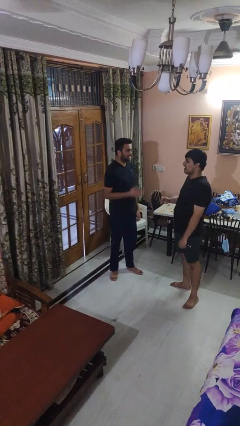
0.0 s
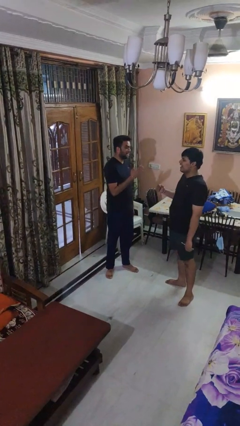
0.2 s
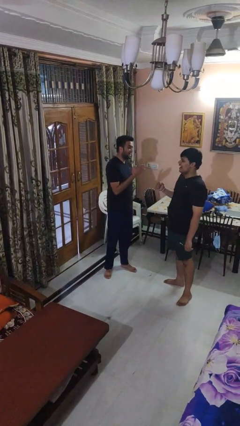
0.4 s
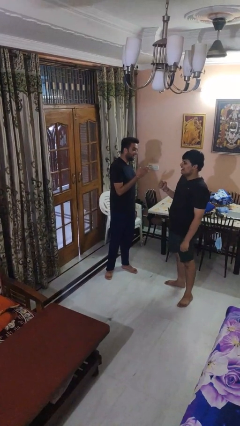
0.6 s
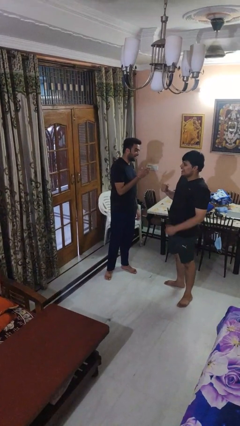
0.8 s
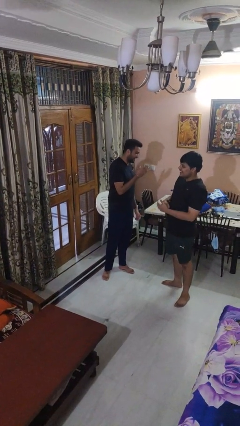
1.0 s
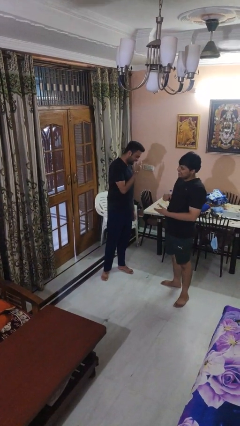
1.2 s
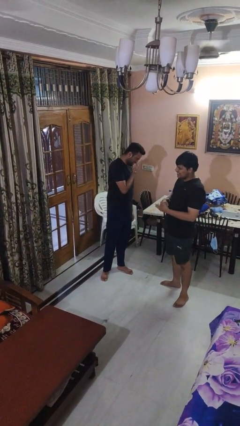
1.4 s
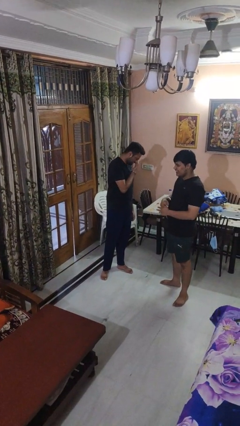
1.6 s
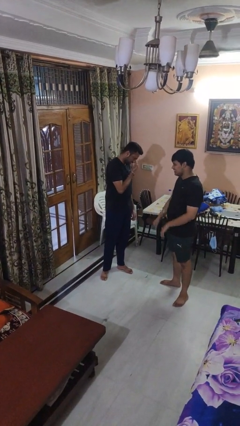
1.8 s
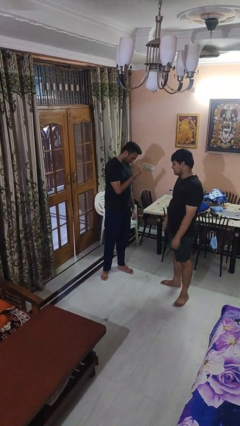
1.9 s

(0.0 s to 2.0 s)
person laughs with person

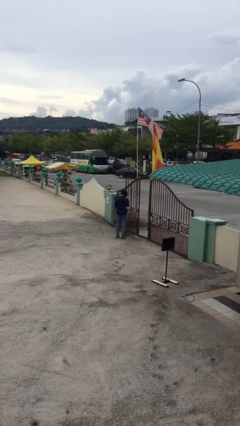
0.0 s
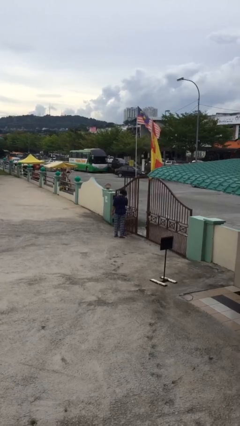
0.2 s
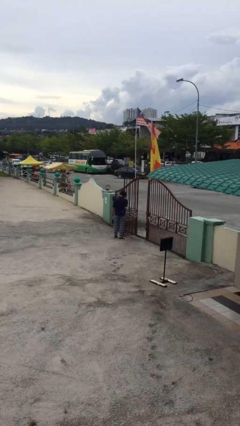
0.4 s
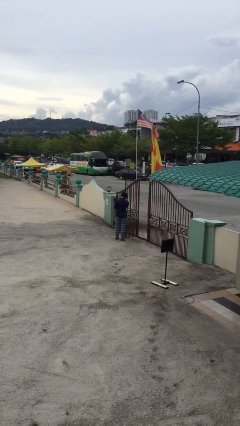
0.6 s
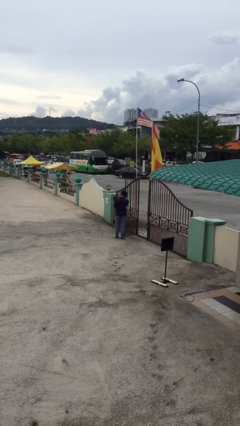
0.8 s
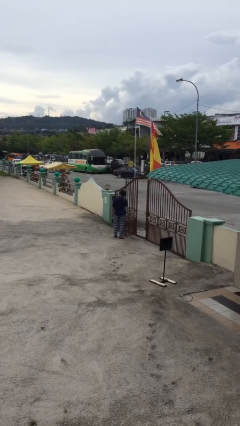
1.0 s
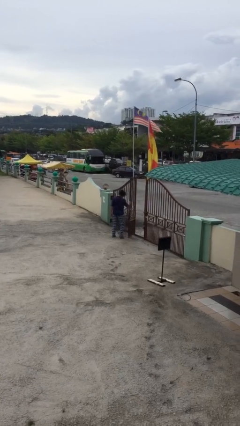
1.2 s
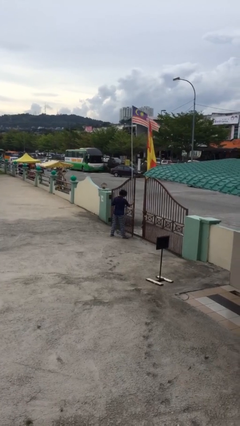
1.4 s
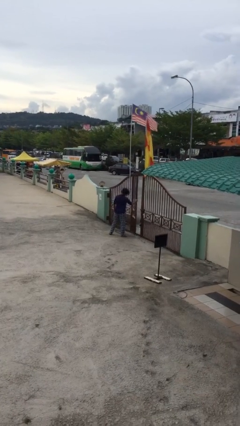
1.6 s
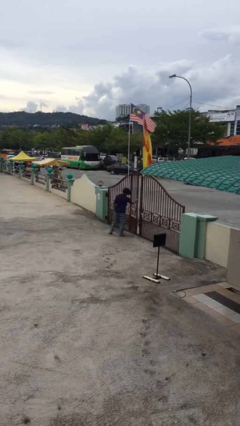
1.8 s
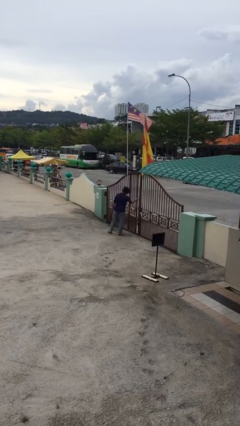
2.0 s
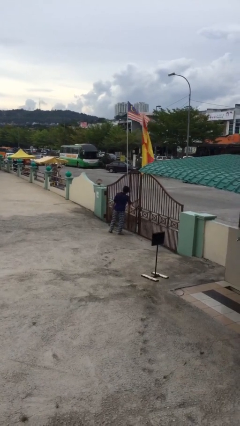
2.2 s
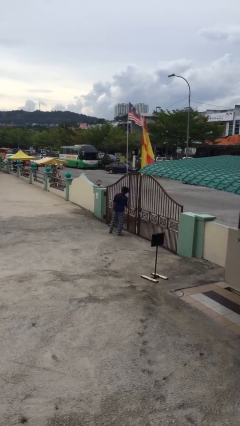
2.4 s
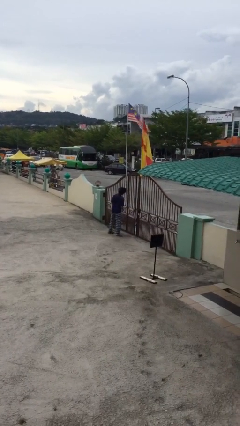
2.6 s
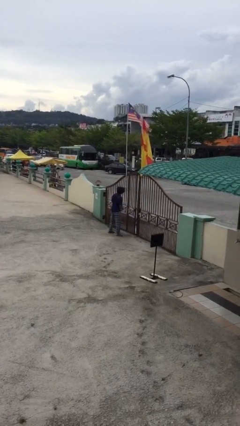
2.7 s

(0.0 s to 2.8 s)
person closes facility door

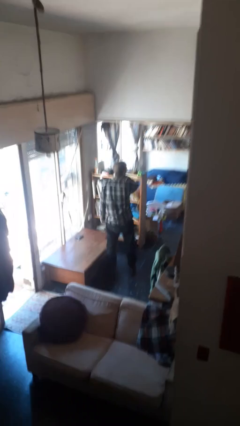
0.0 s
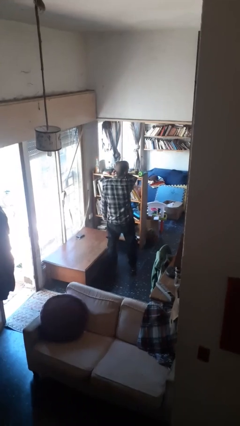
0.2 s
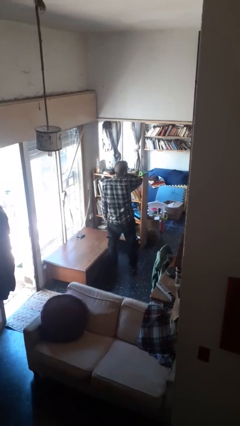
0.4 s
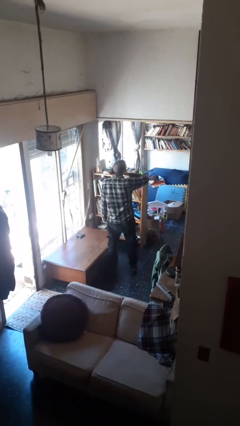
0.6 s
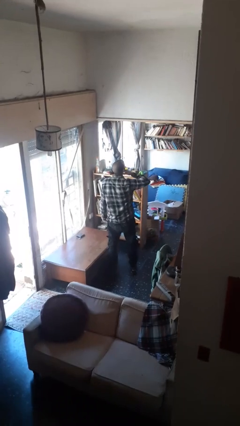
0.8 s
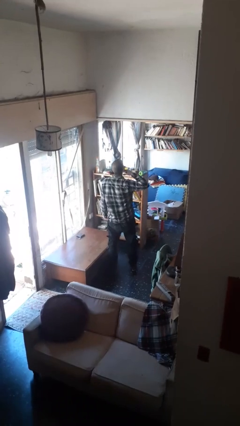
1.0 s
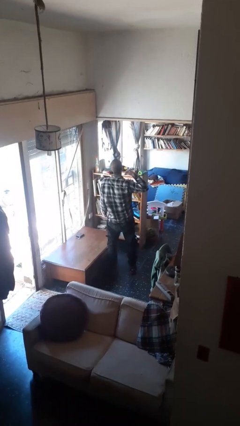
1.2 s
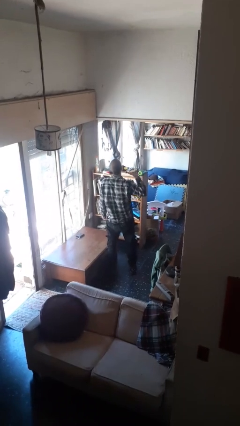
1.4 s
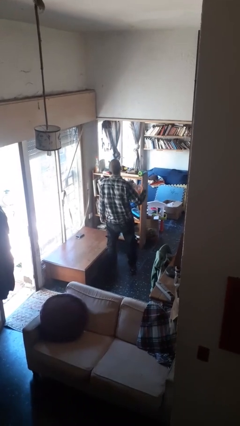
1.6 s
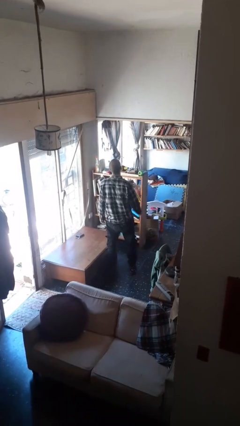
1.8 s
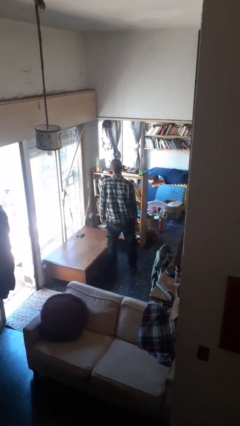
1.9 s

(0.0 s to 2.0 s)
person gestures cut

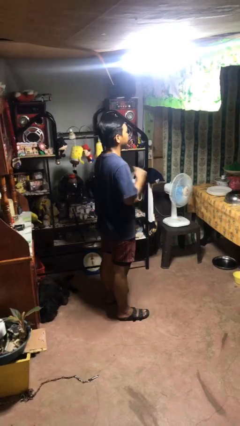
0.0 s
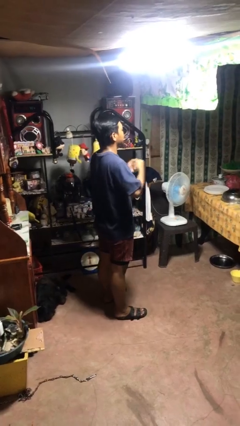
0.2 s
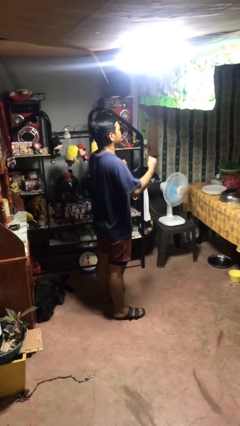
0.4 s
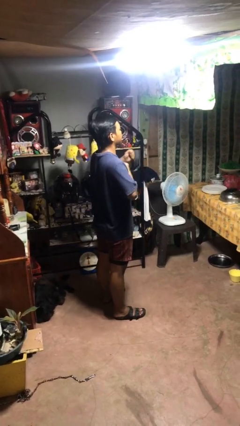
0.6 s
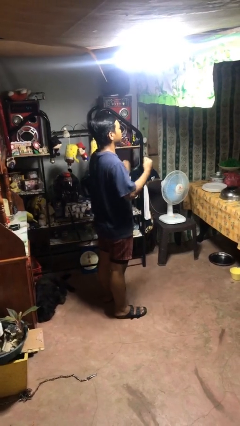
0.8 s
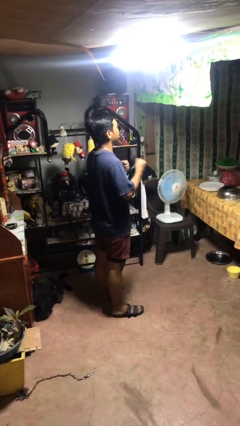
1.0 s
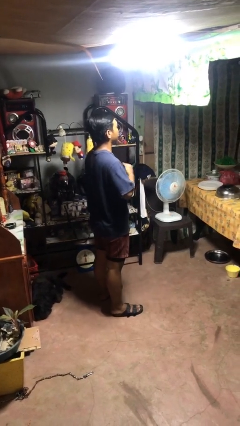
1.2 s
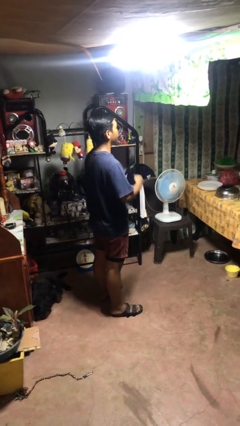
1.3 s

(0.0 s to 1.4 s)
person drums on chest

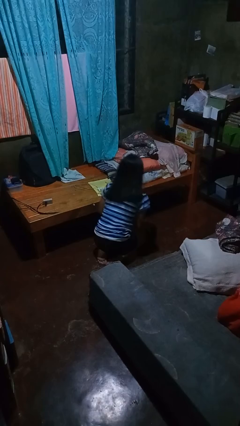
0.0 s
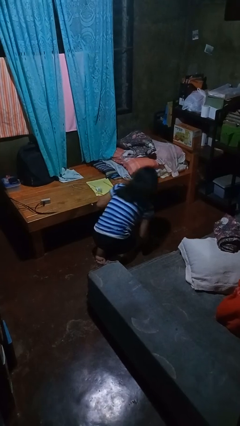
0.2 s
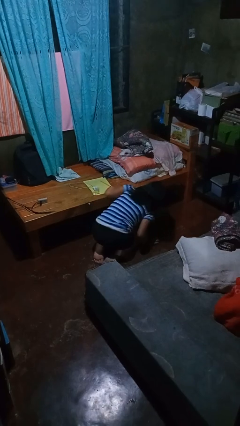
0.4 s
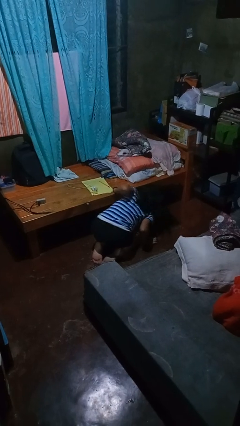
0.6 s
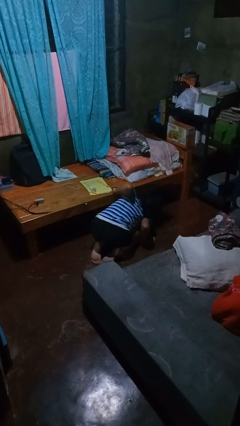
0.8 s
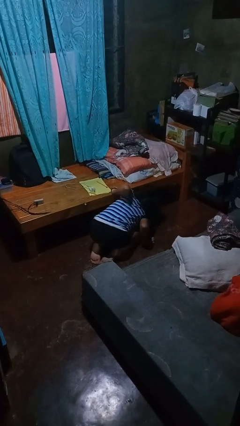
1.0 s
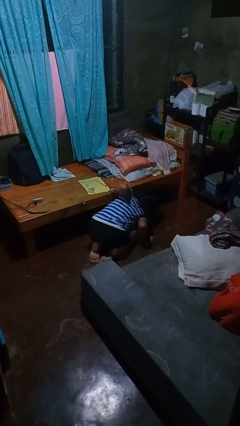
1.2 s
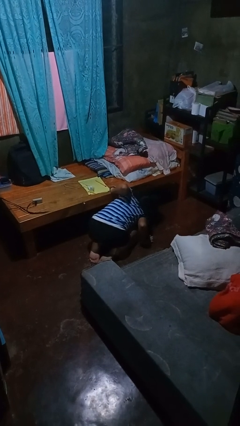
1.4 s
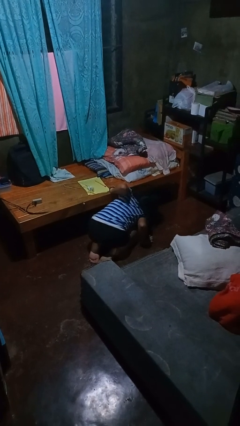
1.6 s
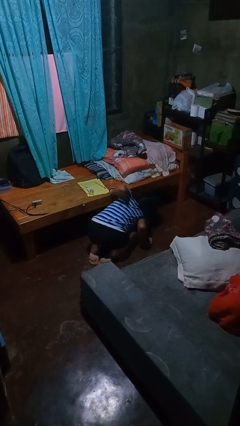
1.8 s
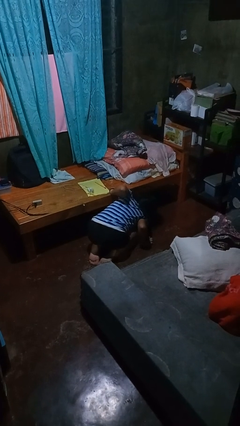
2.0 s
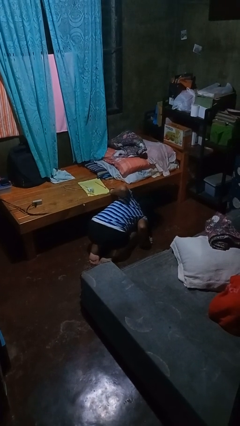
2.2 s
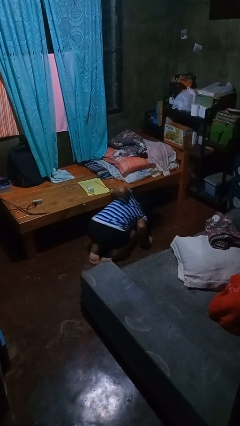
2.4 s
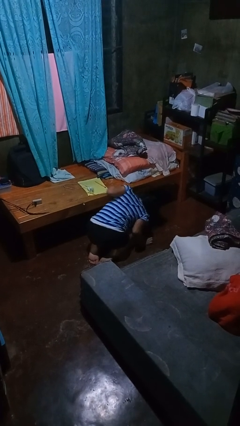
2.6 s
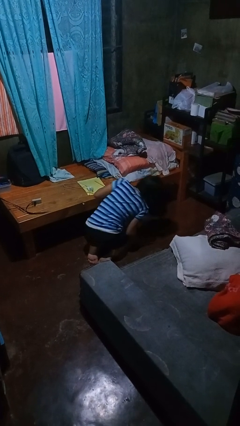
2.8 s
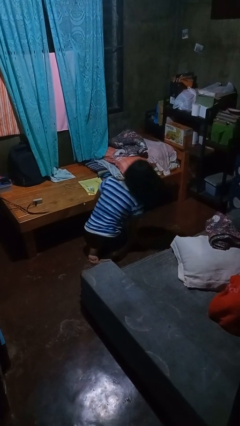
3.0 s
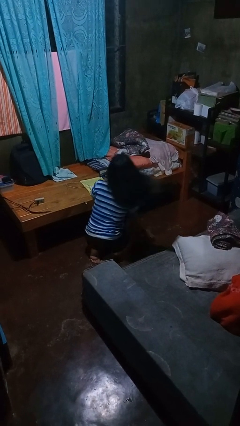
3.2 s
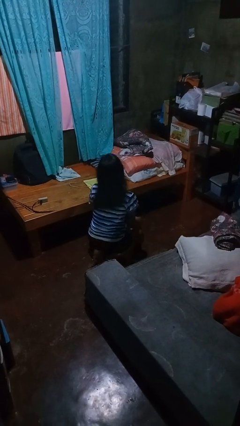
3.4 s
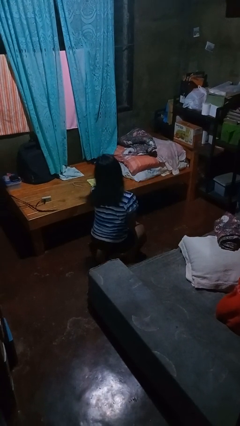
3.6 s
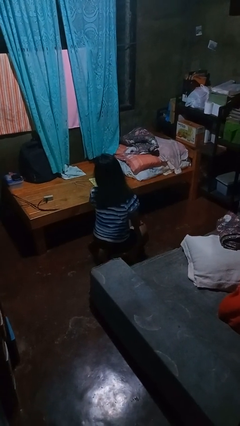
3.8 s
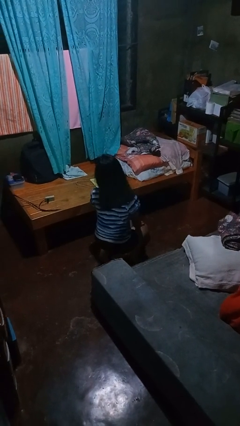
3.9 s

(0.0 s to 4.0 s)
person searches under bed

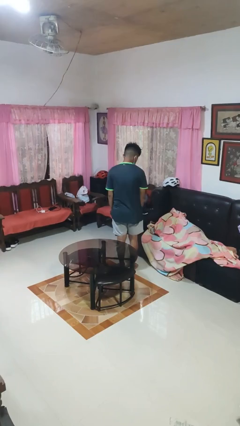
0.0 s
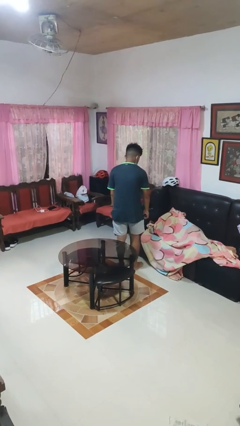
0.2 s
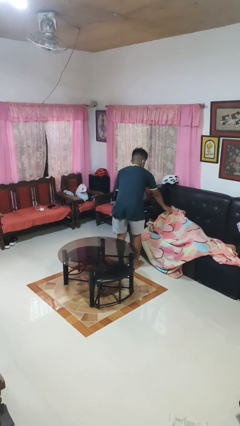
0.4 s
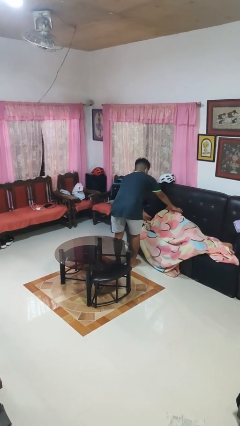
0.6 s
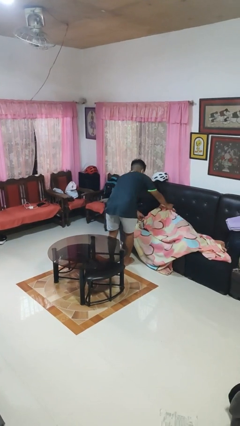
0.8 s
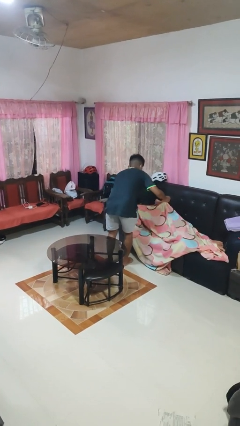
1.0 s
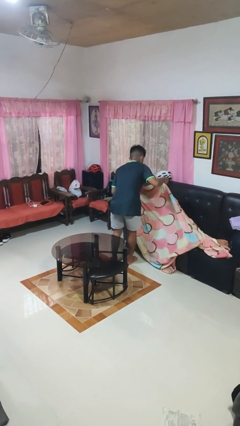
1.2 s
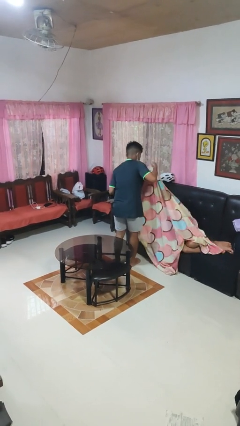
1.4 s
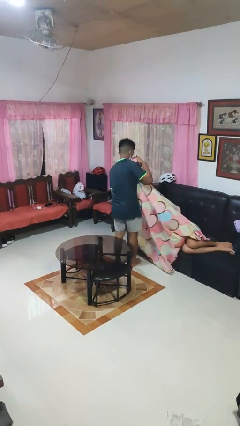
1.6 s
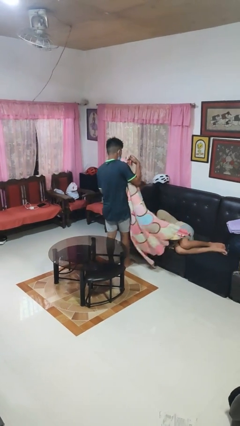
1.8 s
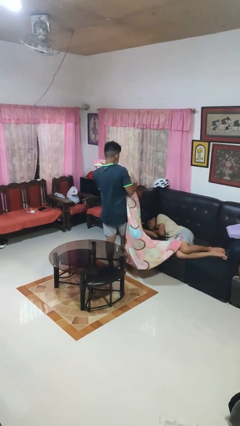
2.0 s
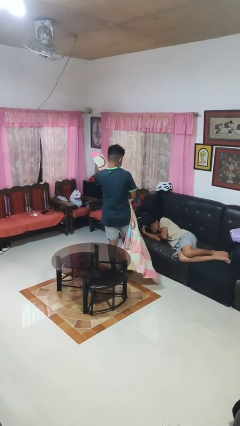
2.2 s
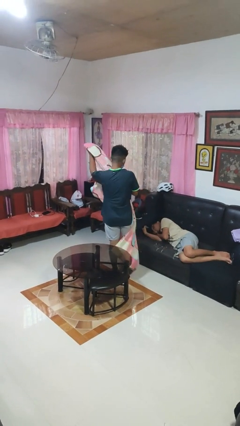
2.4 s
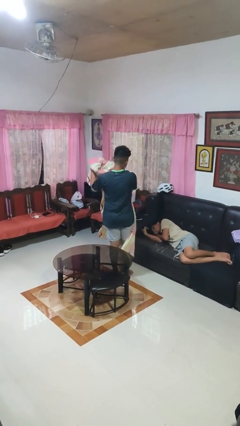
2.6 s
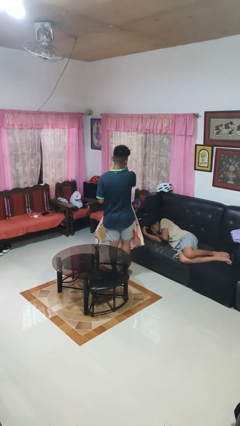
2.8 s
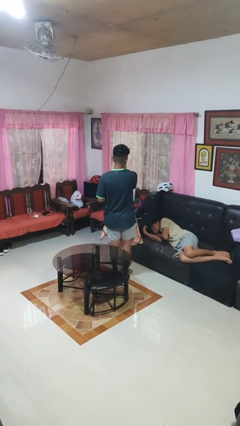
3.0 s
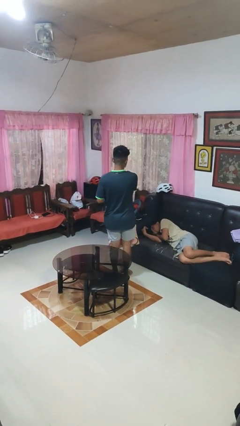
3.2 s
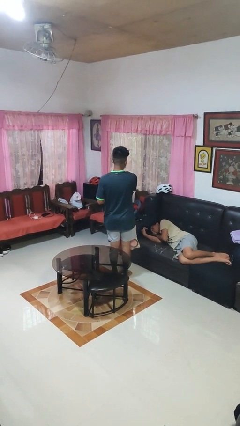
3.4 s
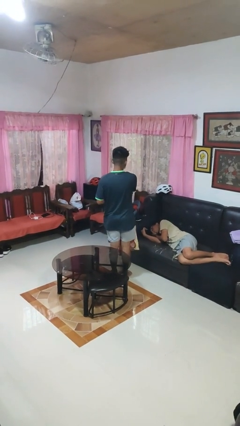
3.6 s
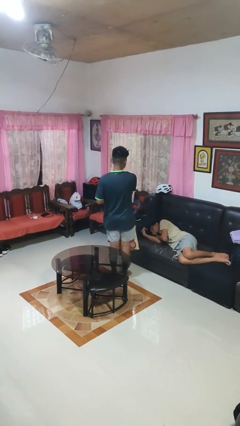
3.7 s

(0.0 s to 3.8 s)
person uncovers friend with blanket

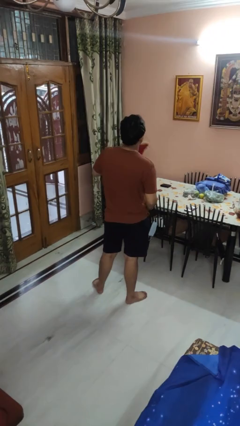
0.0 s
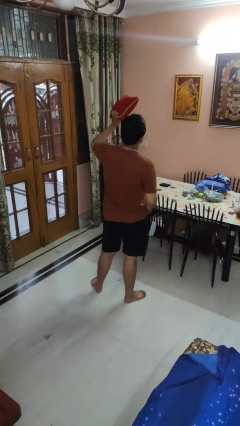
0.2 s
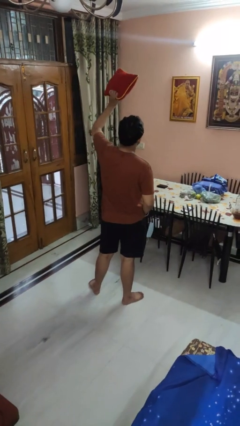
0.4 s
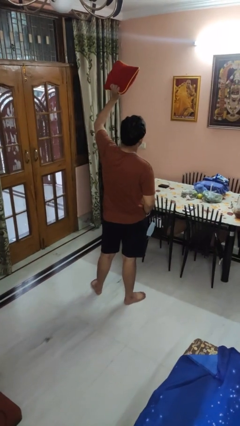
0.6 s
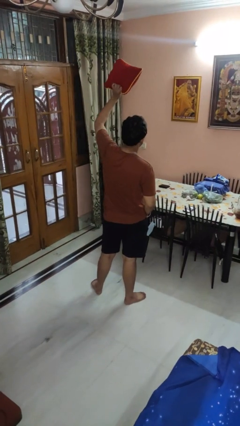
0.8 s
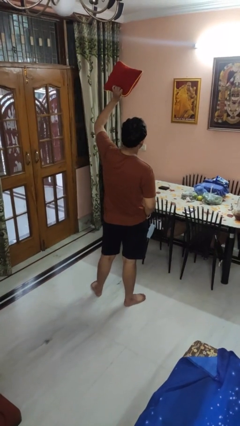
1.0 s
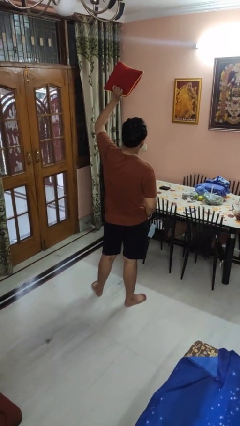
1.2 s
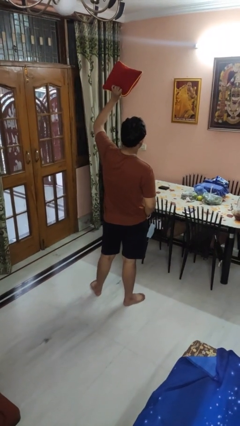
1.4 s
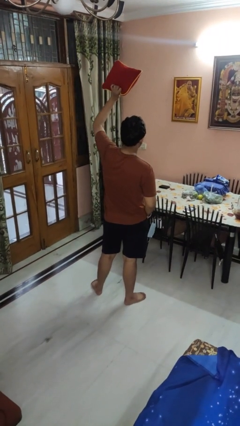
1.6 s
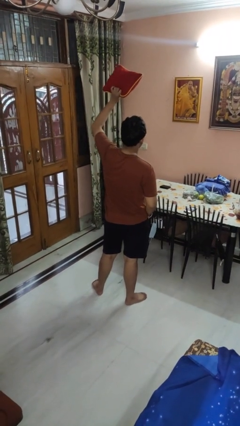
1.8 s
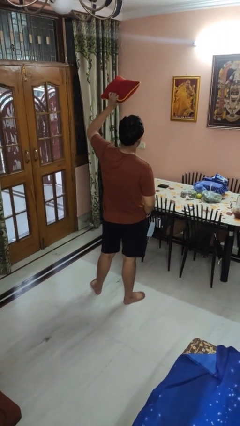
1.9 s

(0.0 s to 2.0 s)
person holds object above head
